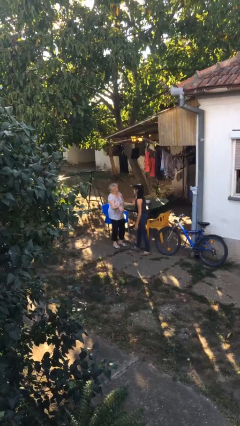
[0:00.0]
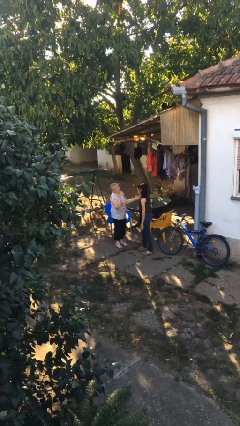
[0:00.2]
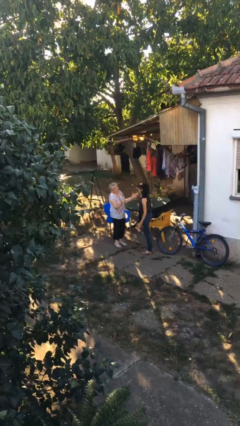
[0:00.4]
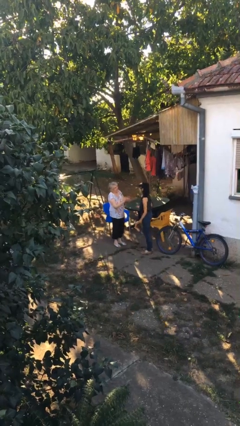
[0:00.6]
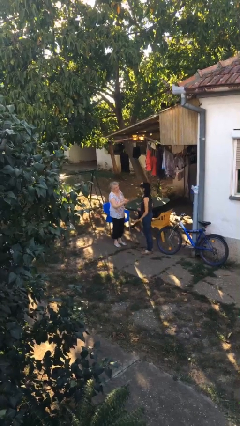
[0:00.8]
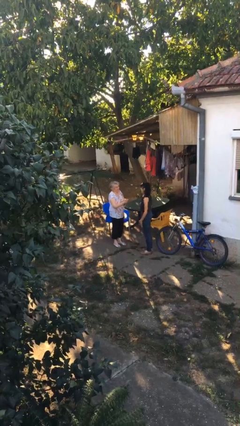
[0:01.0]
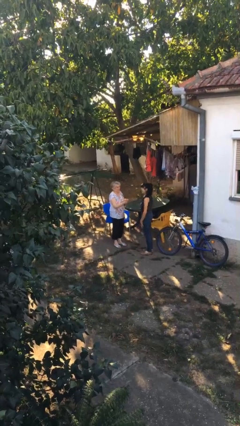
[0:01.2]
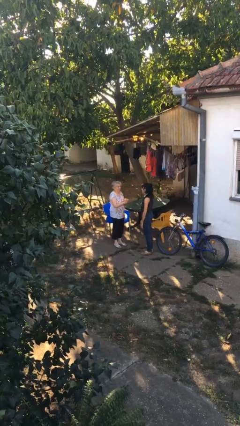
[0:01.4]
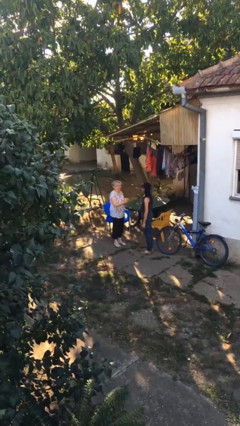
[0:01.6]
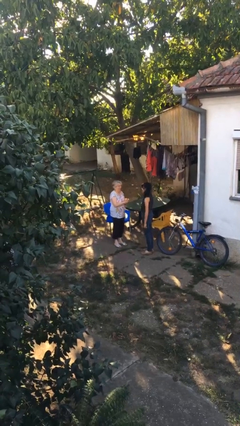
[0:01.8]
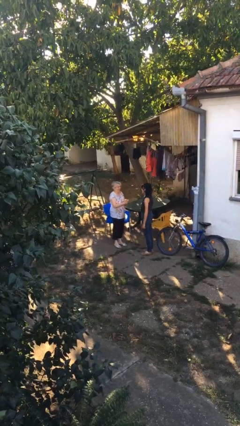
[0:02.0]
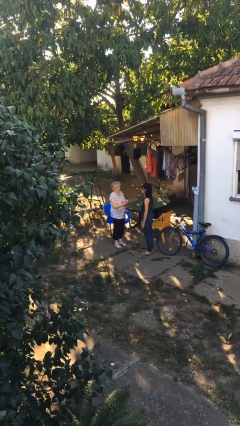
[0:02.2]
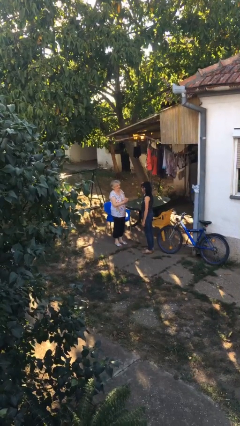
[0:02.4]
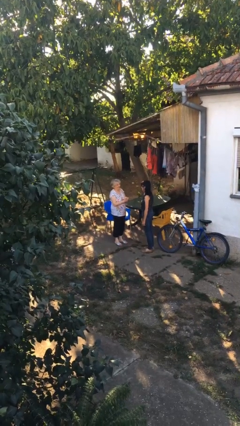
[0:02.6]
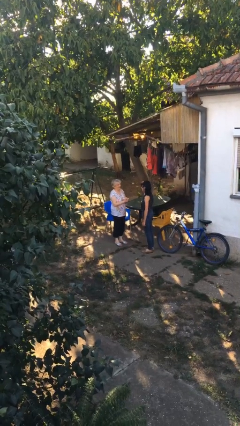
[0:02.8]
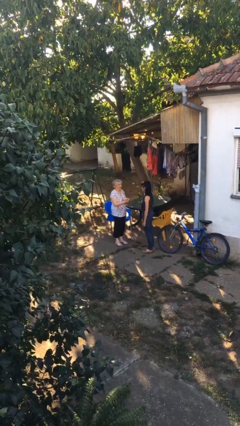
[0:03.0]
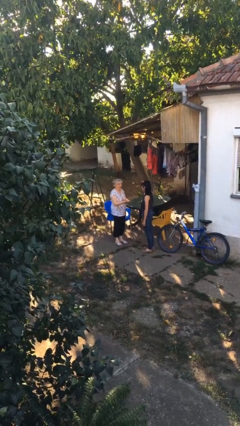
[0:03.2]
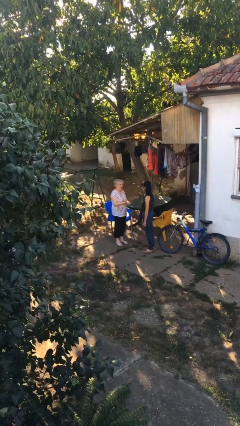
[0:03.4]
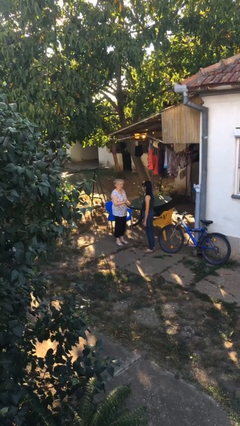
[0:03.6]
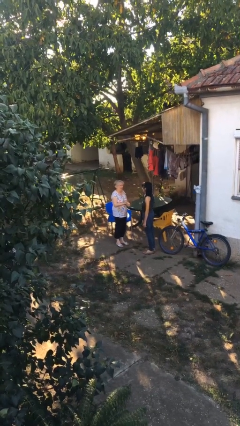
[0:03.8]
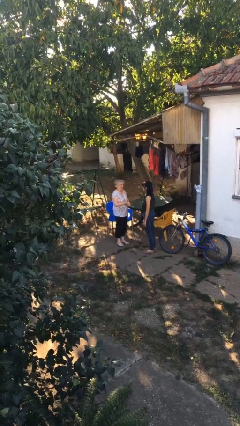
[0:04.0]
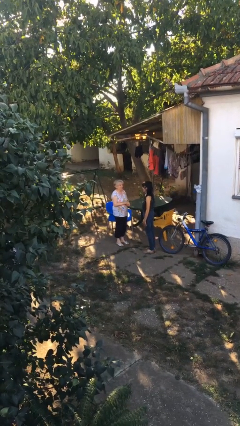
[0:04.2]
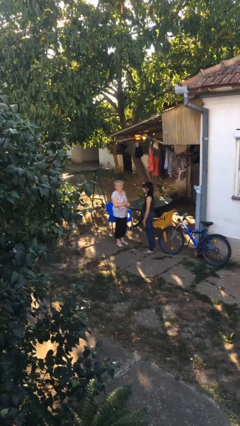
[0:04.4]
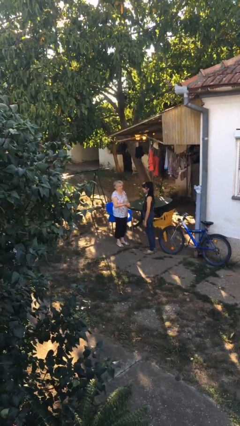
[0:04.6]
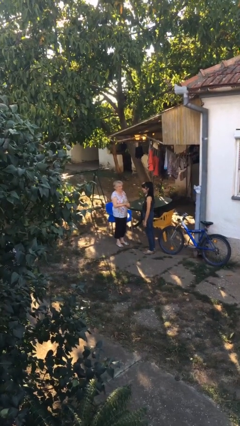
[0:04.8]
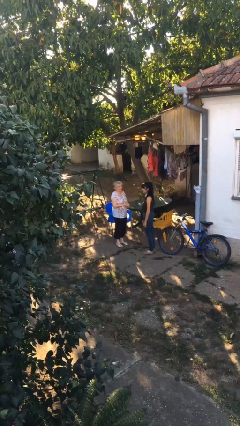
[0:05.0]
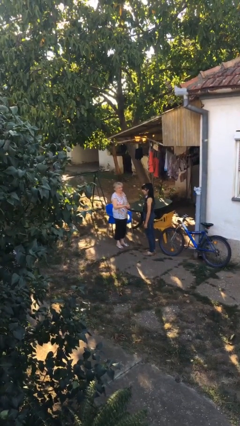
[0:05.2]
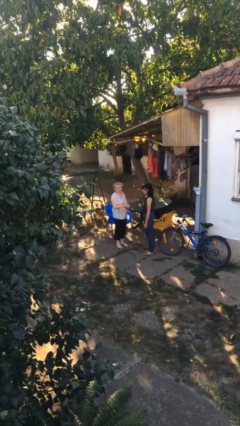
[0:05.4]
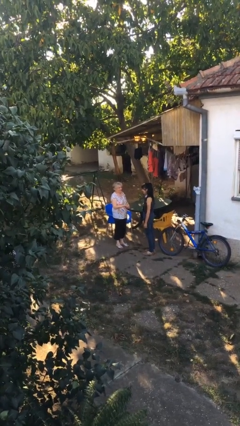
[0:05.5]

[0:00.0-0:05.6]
person talks to person

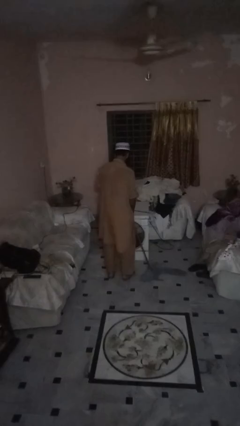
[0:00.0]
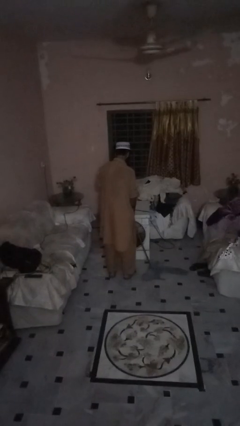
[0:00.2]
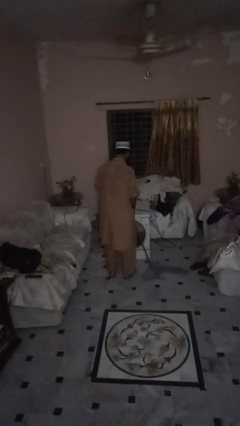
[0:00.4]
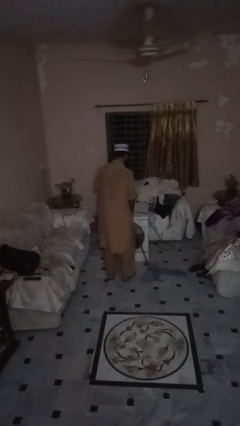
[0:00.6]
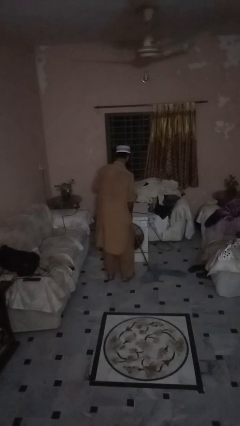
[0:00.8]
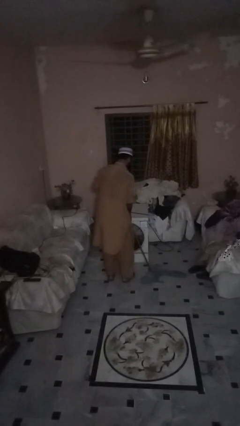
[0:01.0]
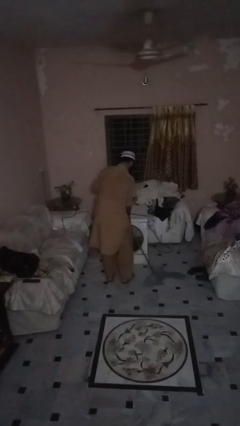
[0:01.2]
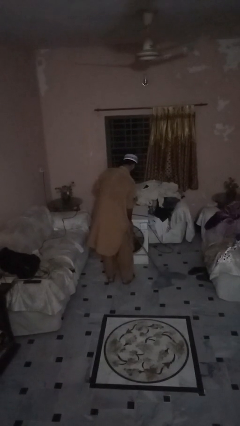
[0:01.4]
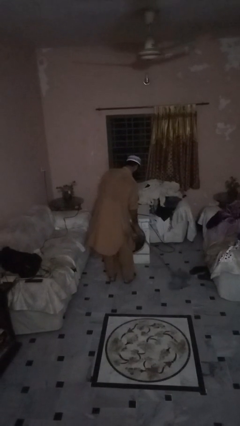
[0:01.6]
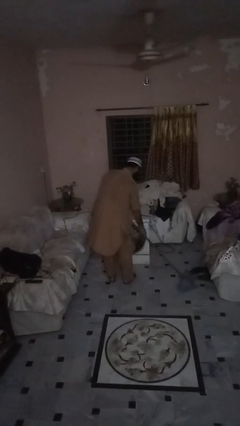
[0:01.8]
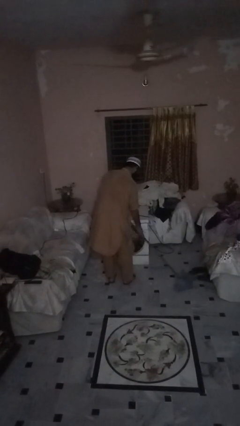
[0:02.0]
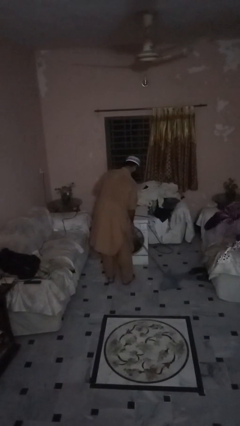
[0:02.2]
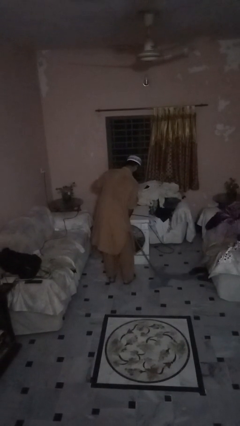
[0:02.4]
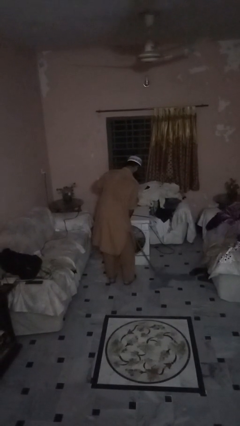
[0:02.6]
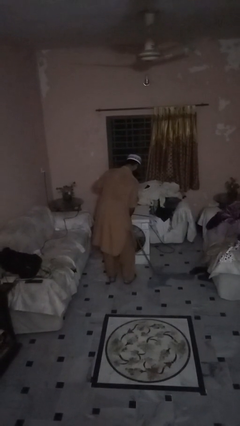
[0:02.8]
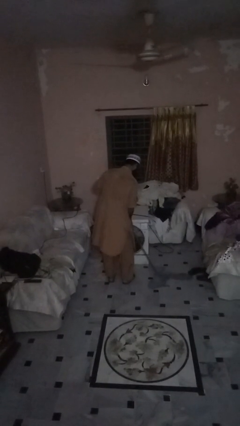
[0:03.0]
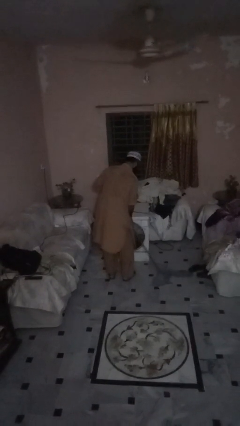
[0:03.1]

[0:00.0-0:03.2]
person mops

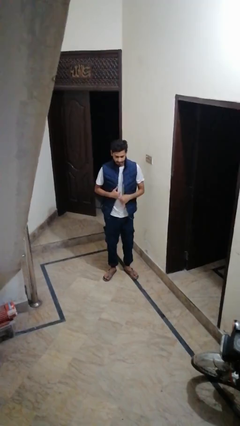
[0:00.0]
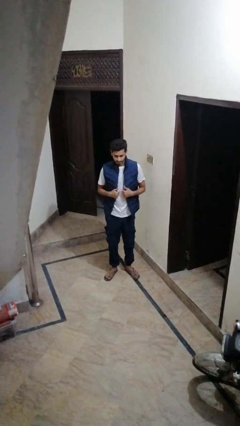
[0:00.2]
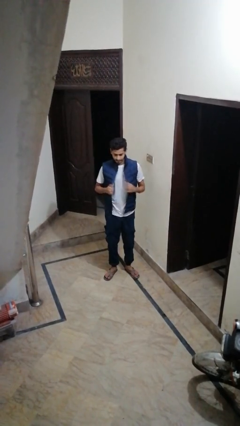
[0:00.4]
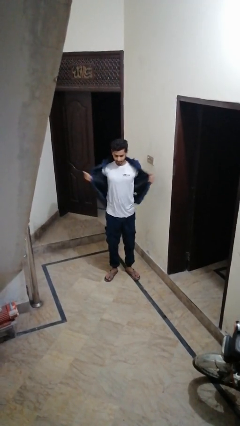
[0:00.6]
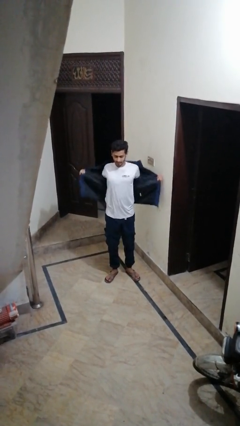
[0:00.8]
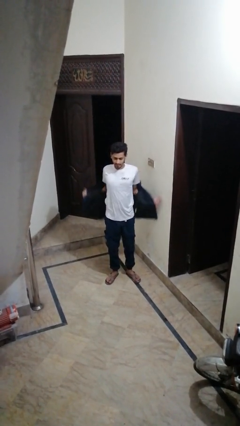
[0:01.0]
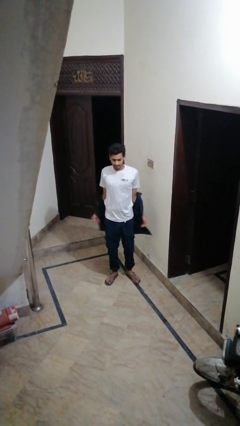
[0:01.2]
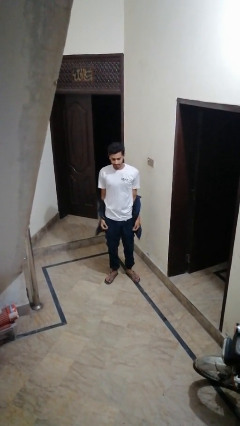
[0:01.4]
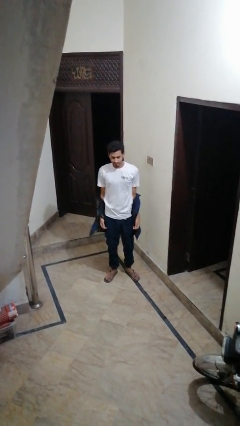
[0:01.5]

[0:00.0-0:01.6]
person takes off jacket

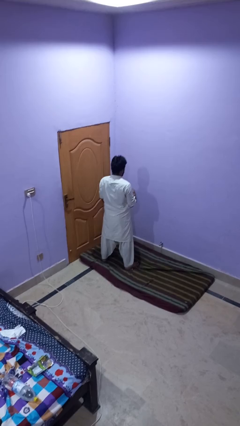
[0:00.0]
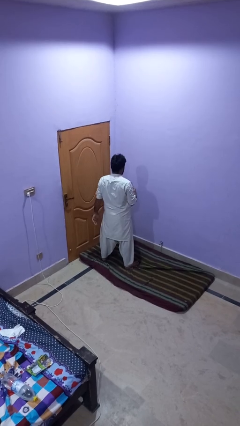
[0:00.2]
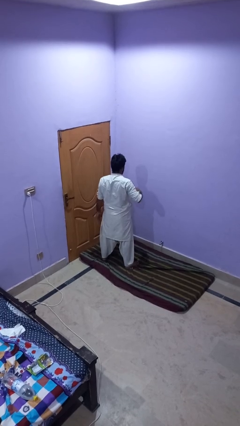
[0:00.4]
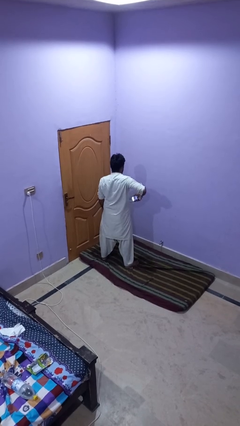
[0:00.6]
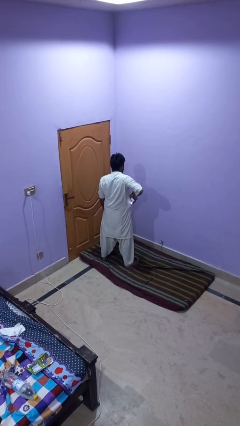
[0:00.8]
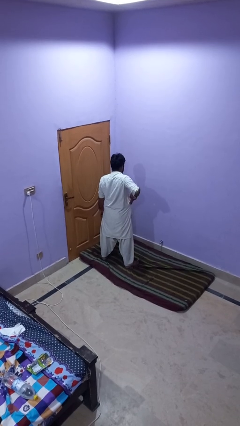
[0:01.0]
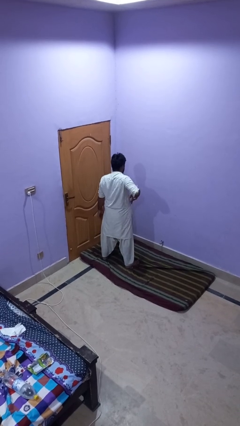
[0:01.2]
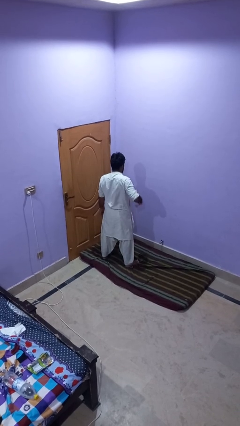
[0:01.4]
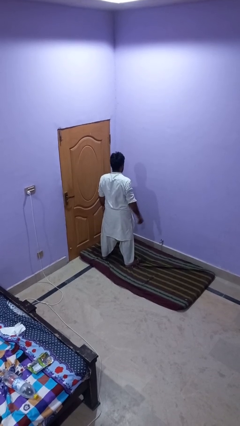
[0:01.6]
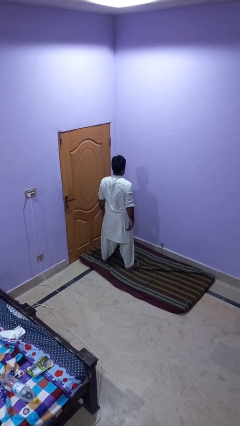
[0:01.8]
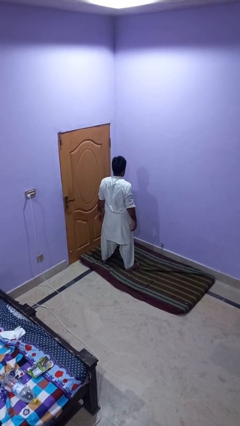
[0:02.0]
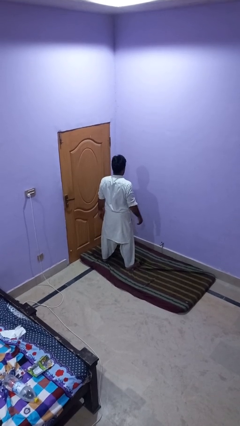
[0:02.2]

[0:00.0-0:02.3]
person puts phone into pocket

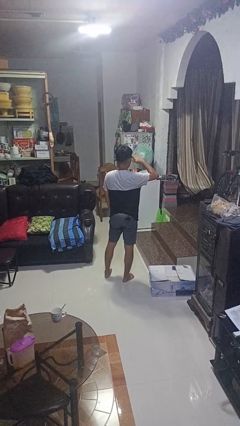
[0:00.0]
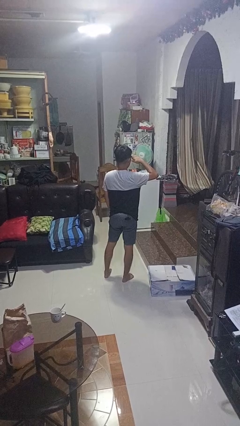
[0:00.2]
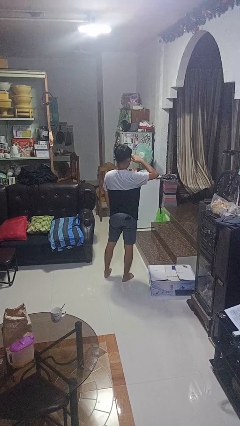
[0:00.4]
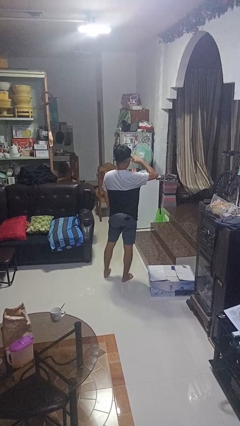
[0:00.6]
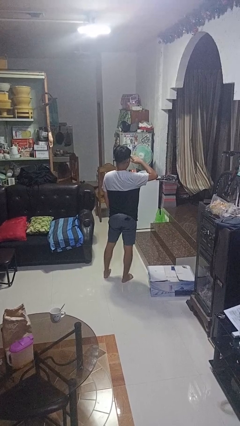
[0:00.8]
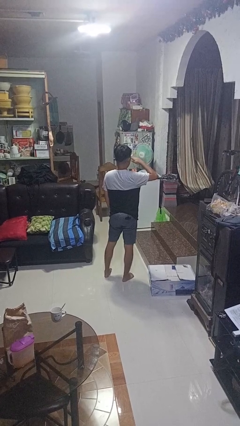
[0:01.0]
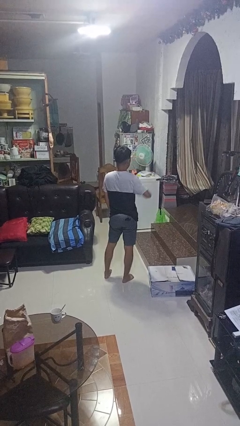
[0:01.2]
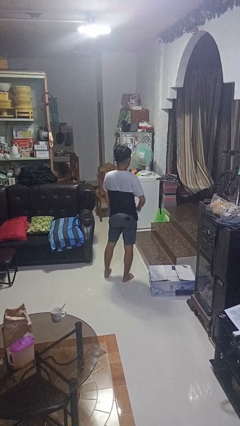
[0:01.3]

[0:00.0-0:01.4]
person salutes

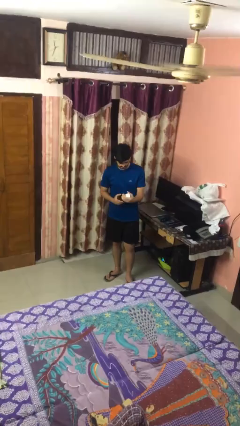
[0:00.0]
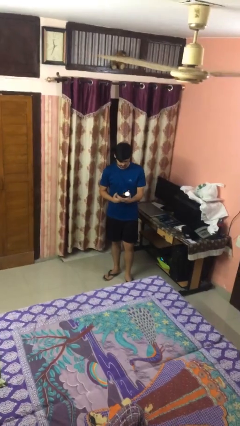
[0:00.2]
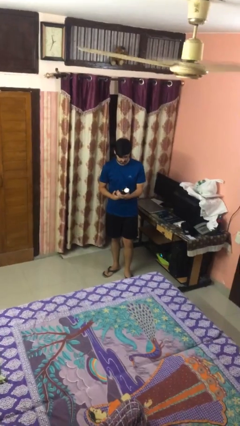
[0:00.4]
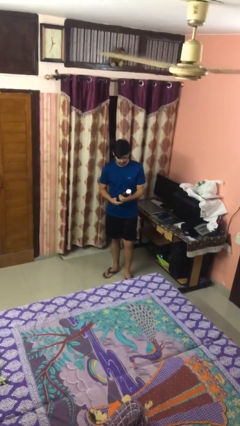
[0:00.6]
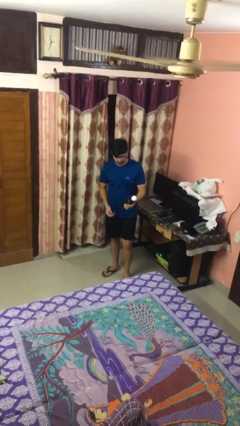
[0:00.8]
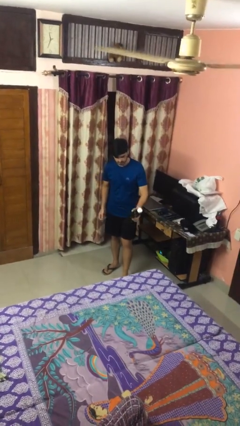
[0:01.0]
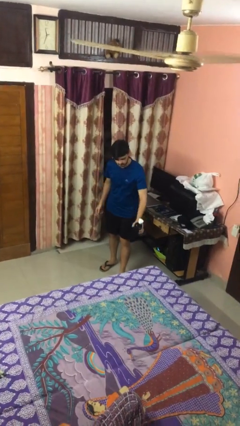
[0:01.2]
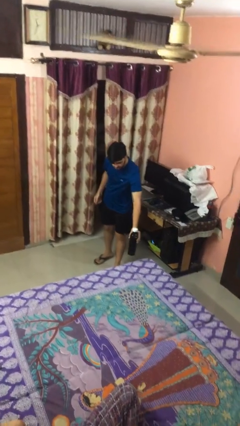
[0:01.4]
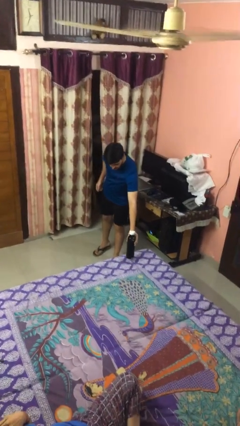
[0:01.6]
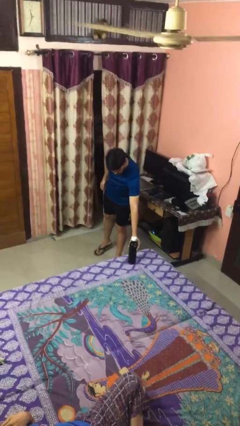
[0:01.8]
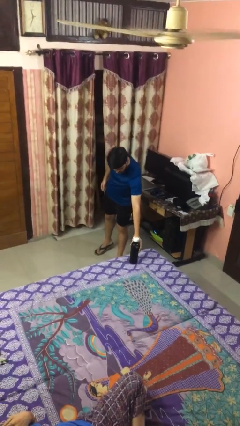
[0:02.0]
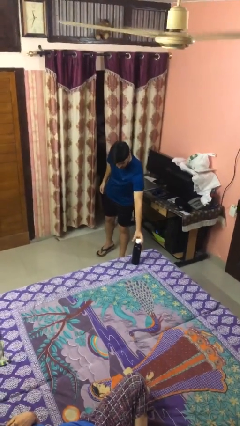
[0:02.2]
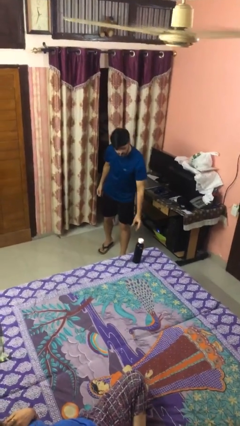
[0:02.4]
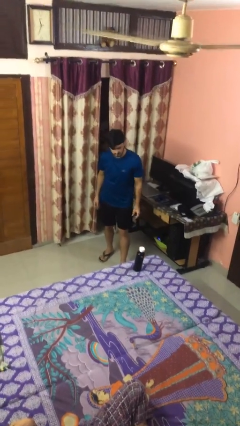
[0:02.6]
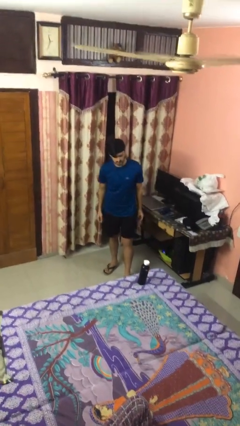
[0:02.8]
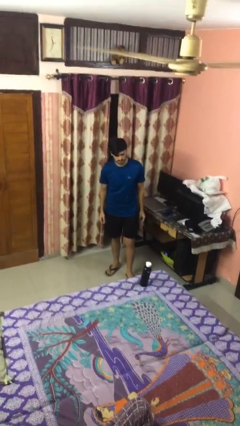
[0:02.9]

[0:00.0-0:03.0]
person puts down object on bed
